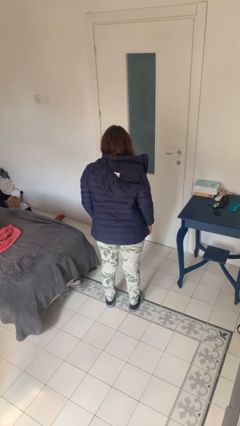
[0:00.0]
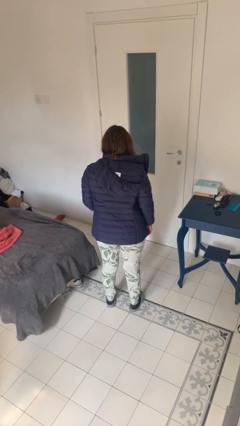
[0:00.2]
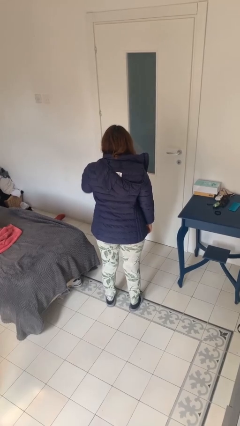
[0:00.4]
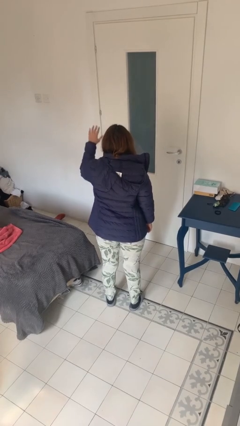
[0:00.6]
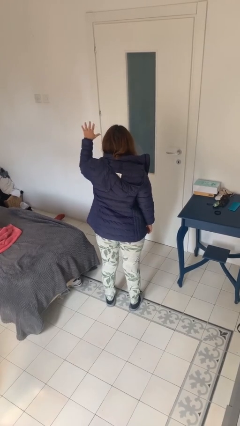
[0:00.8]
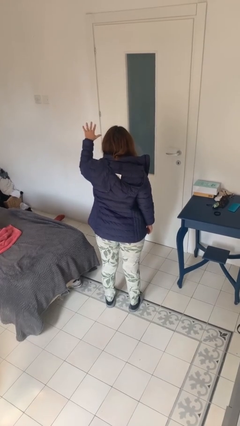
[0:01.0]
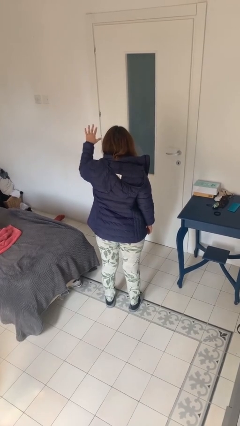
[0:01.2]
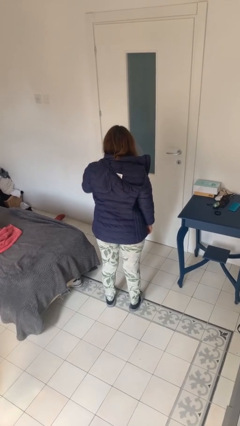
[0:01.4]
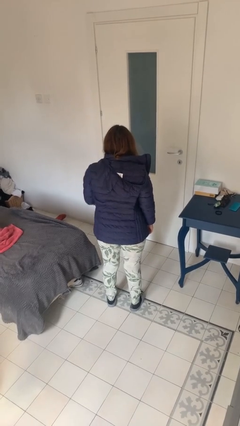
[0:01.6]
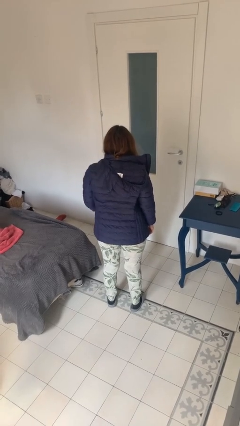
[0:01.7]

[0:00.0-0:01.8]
person gestures number five

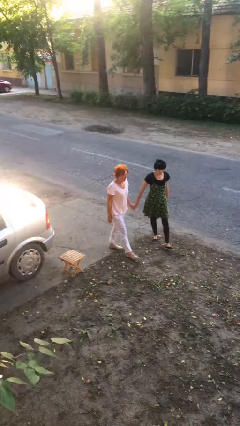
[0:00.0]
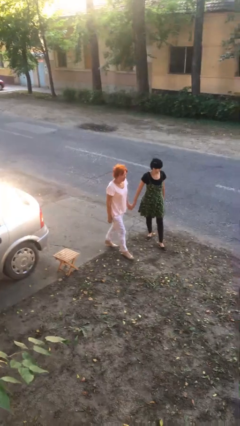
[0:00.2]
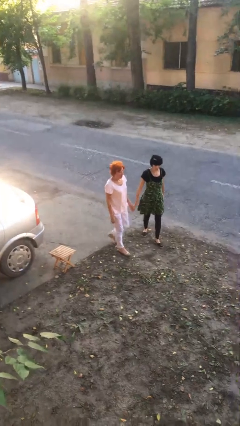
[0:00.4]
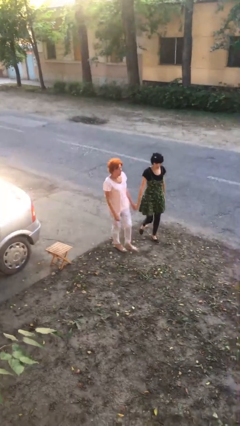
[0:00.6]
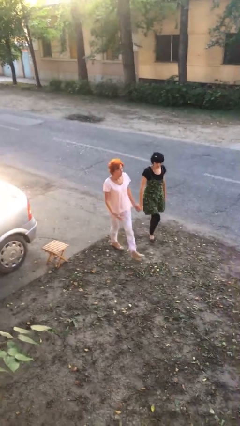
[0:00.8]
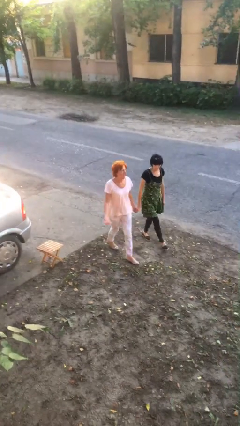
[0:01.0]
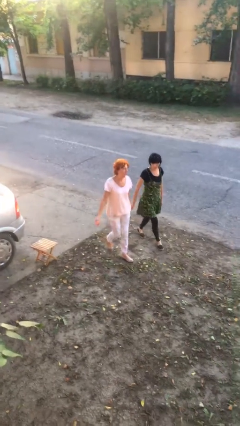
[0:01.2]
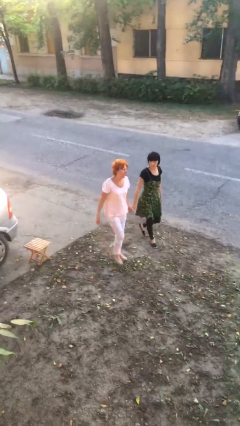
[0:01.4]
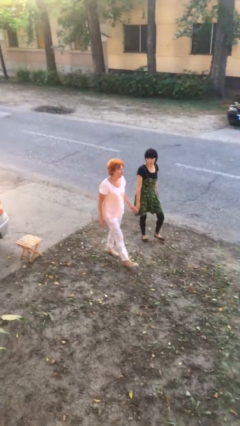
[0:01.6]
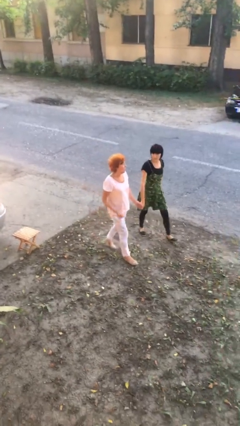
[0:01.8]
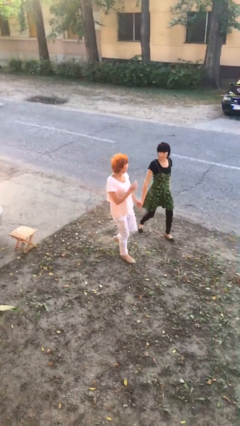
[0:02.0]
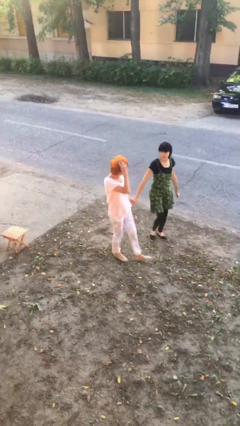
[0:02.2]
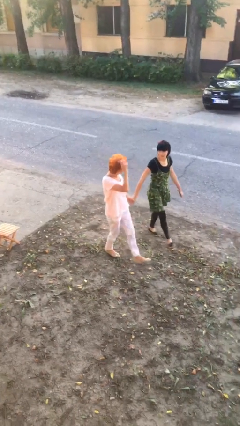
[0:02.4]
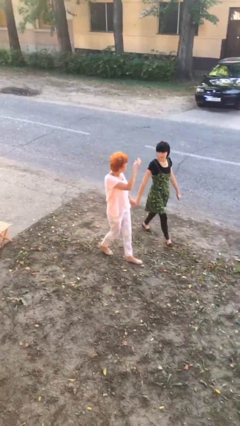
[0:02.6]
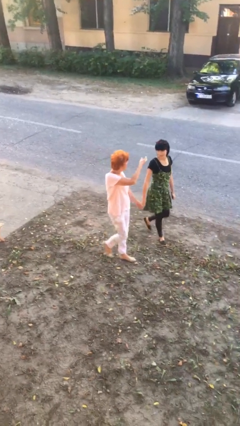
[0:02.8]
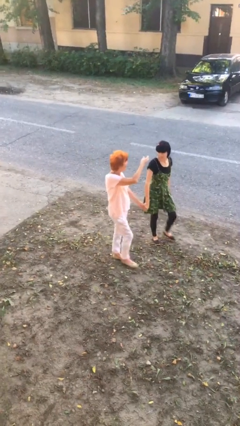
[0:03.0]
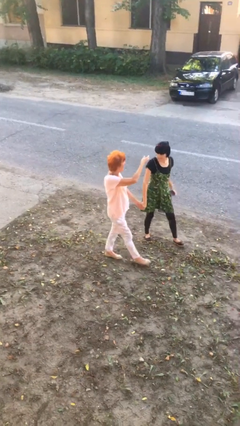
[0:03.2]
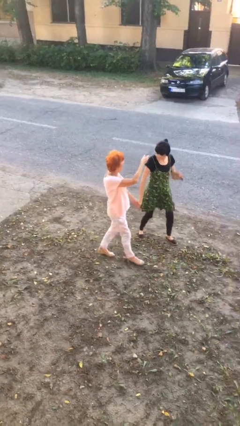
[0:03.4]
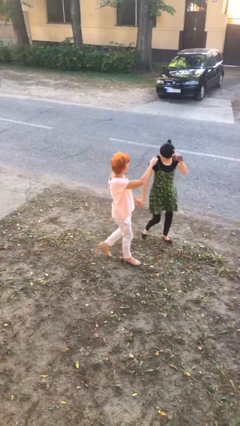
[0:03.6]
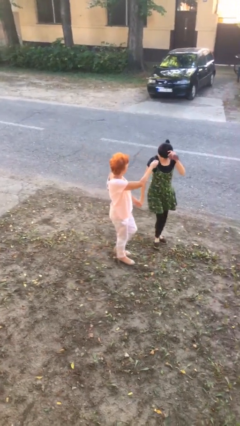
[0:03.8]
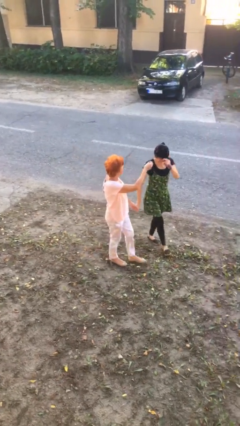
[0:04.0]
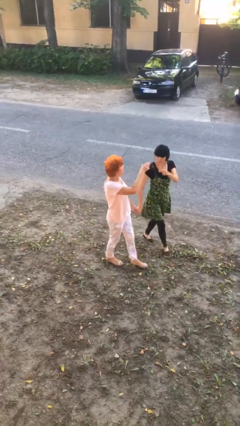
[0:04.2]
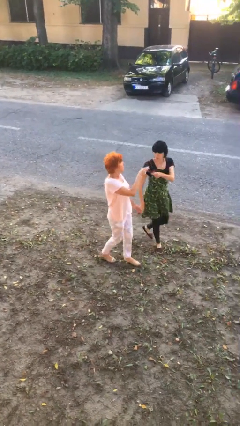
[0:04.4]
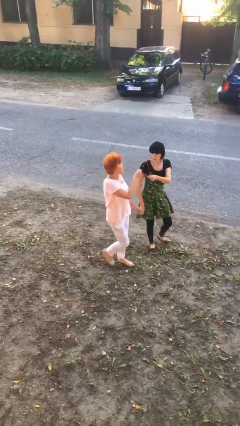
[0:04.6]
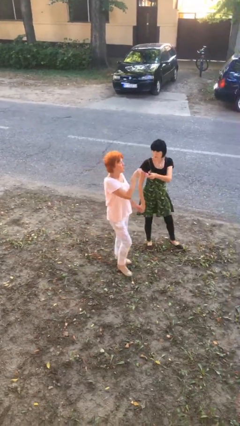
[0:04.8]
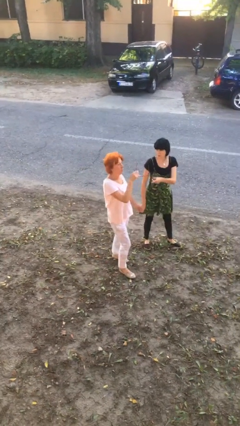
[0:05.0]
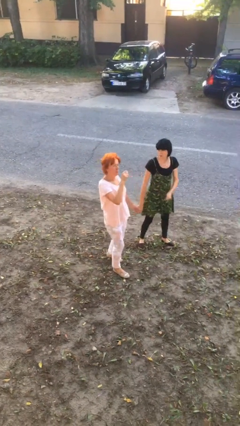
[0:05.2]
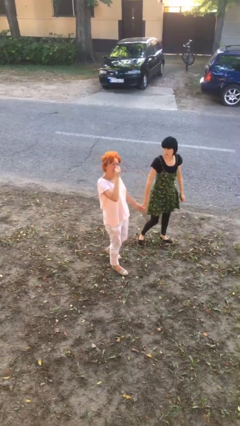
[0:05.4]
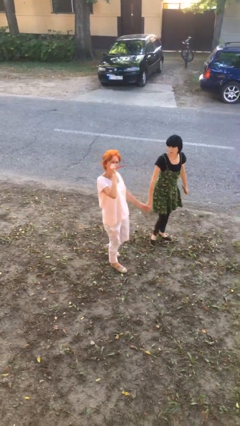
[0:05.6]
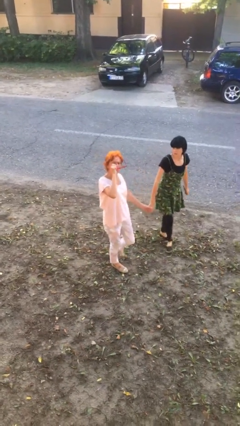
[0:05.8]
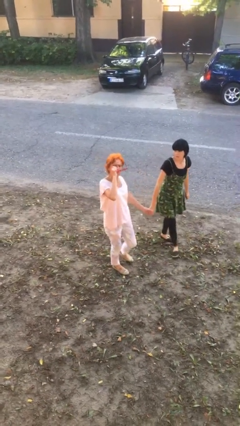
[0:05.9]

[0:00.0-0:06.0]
person holds hand

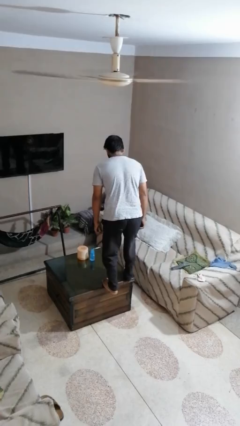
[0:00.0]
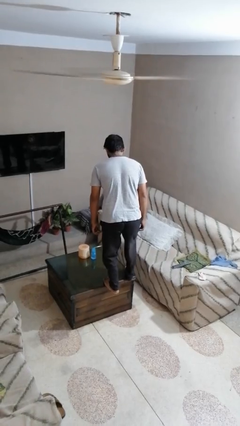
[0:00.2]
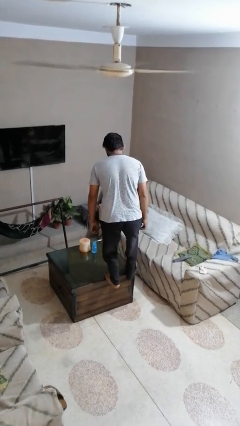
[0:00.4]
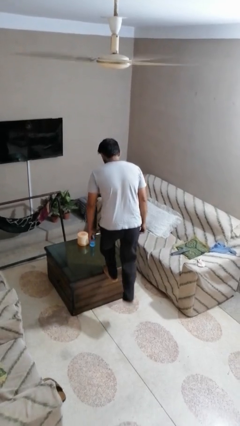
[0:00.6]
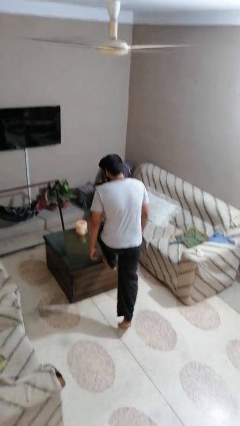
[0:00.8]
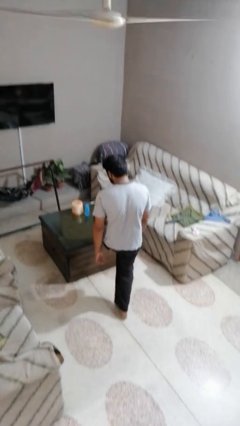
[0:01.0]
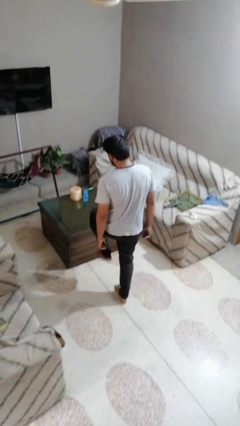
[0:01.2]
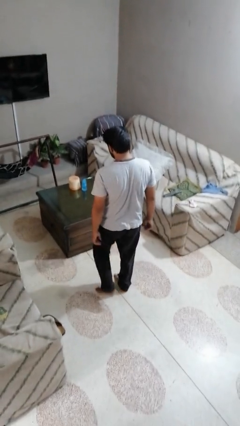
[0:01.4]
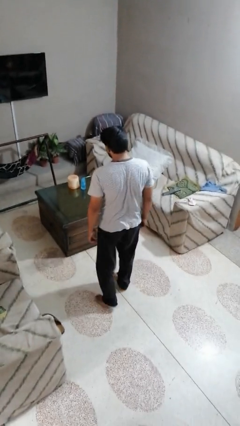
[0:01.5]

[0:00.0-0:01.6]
person climbs off table

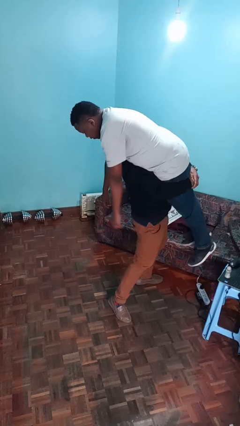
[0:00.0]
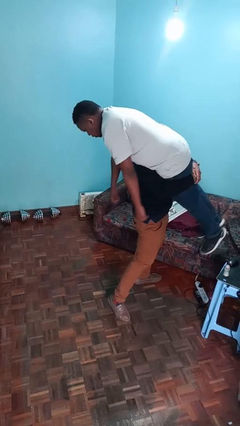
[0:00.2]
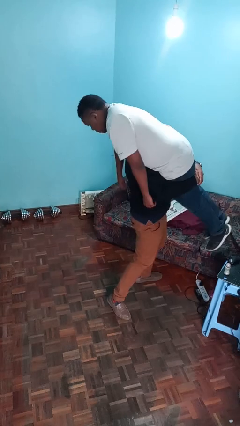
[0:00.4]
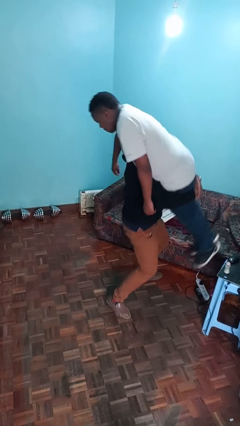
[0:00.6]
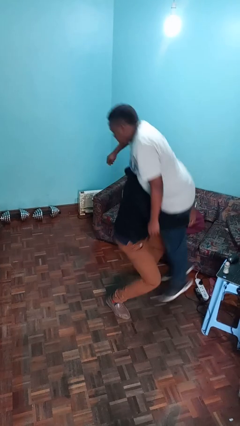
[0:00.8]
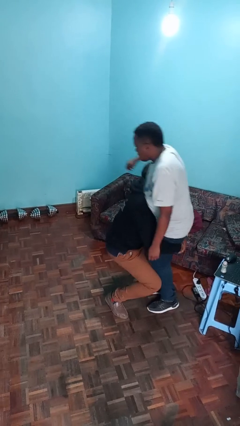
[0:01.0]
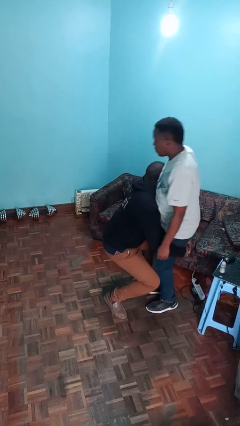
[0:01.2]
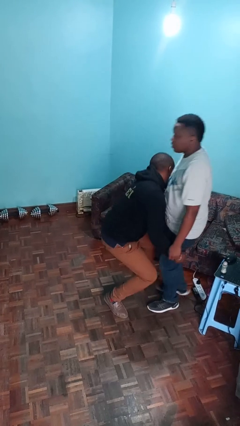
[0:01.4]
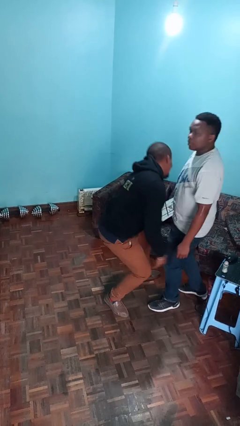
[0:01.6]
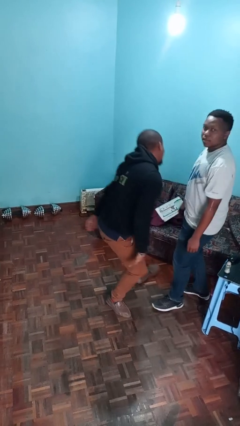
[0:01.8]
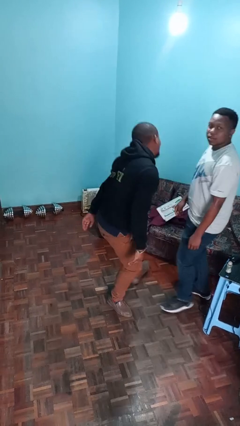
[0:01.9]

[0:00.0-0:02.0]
person puts down person

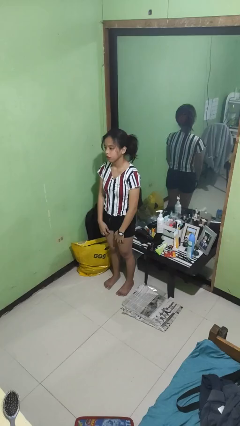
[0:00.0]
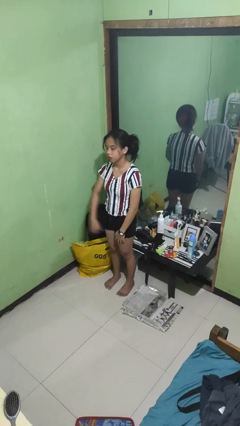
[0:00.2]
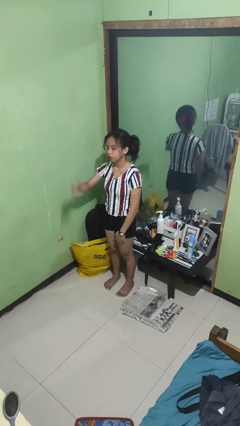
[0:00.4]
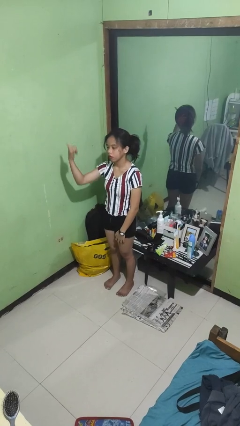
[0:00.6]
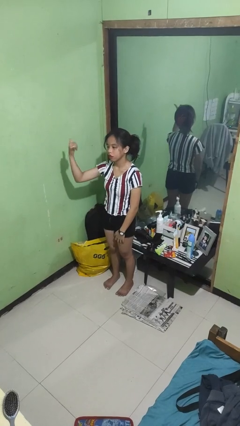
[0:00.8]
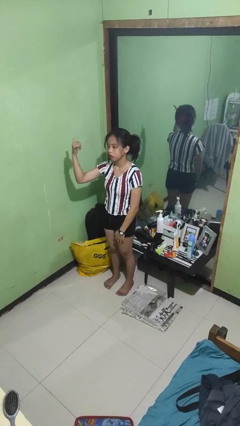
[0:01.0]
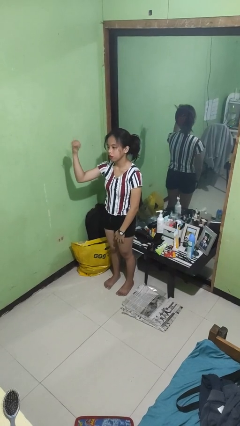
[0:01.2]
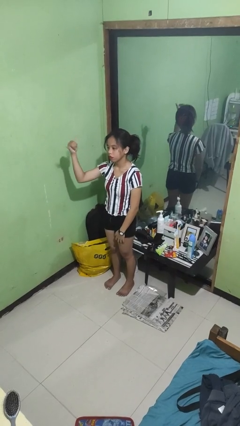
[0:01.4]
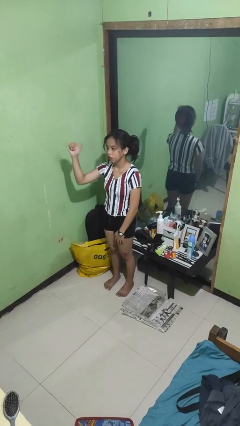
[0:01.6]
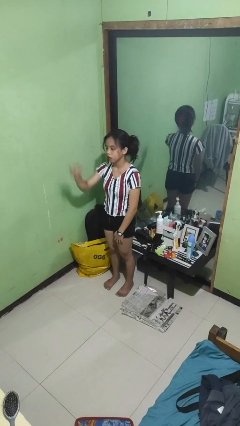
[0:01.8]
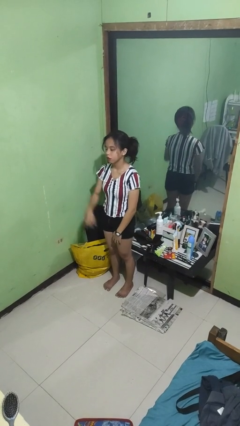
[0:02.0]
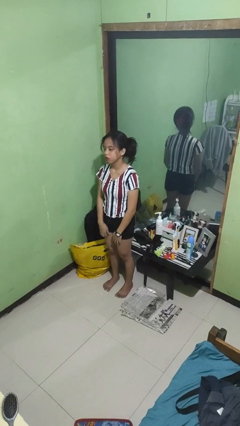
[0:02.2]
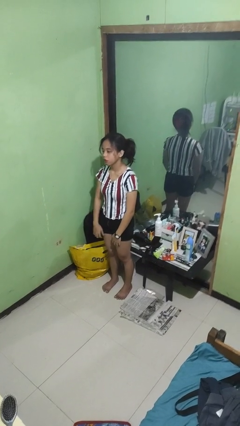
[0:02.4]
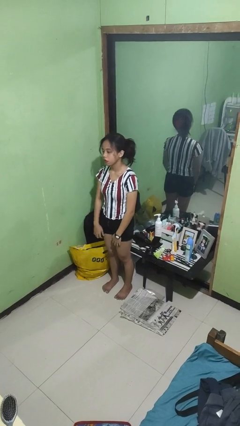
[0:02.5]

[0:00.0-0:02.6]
person gestures hang loose

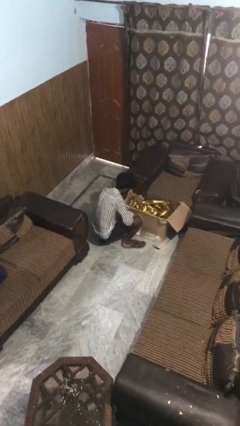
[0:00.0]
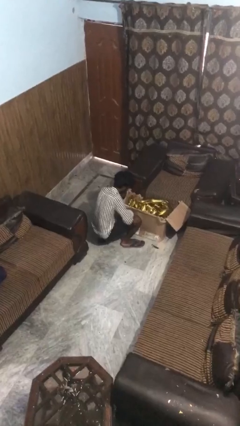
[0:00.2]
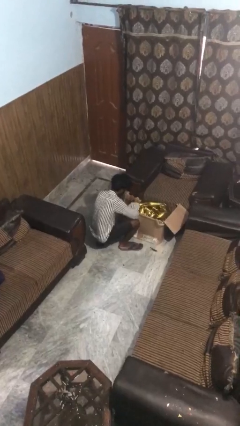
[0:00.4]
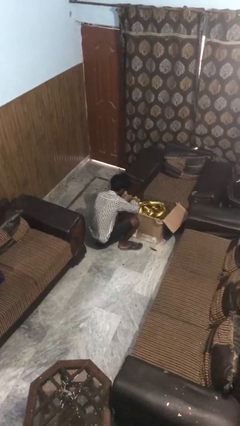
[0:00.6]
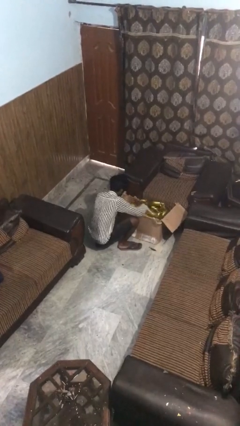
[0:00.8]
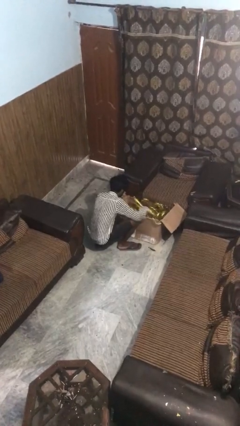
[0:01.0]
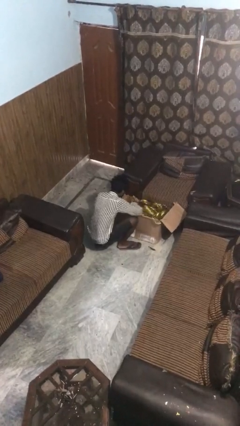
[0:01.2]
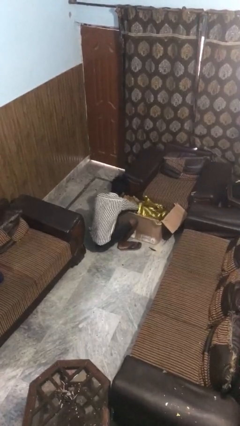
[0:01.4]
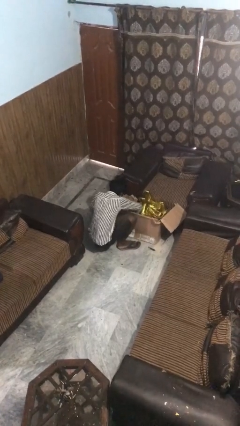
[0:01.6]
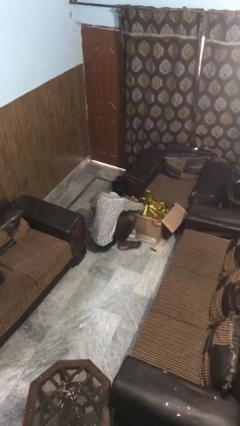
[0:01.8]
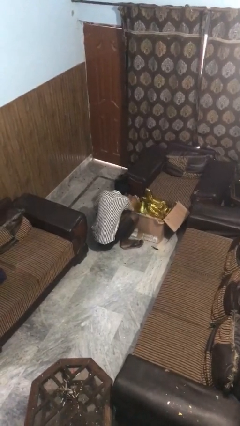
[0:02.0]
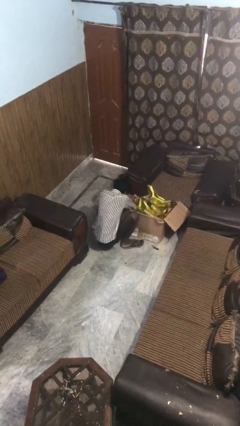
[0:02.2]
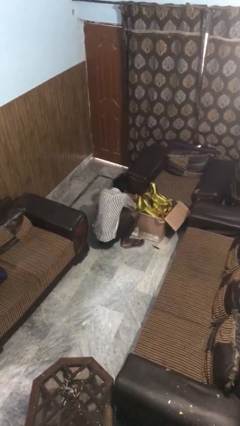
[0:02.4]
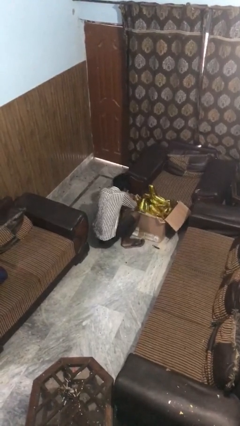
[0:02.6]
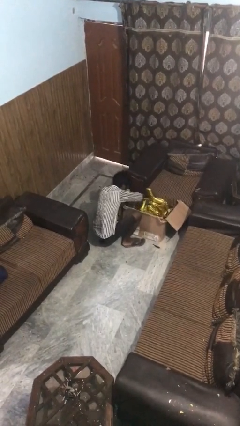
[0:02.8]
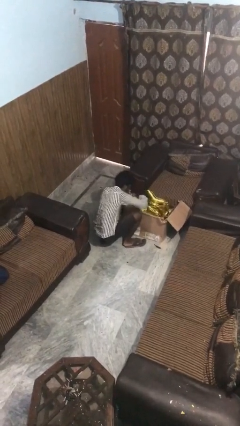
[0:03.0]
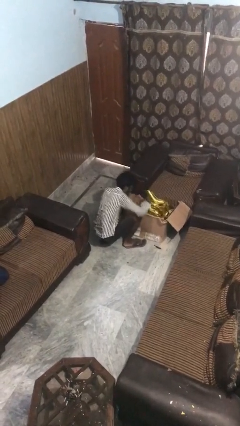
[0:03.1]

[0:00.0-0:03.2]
person searches in box
